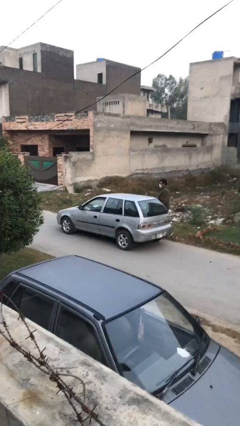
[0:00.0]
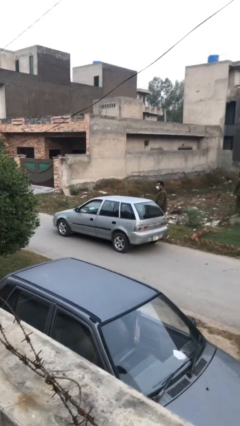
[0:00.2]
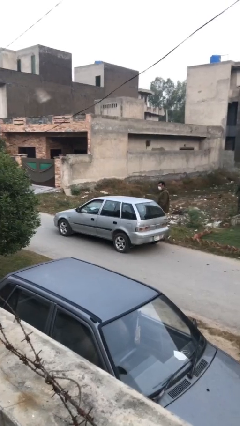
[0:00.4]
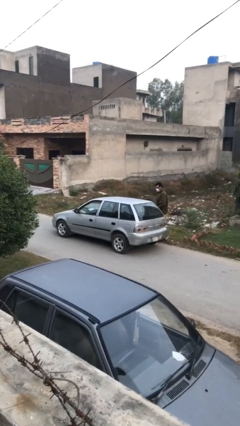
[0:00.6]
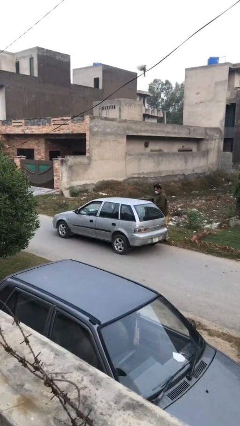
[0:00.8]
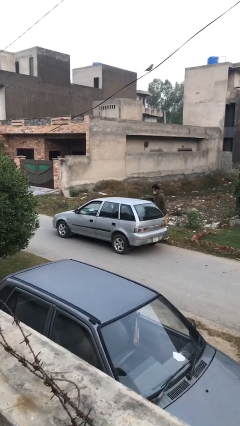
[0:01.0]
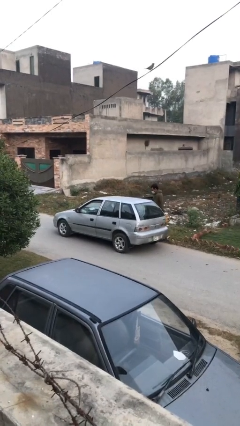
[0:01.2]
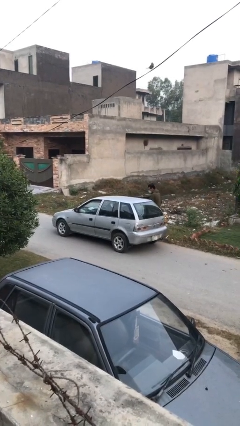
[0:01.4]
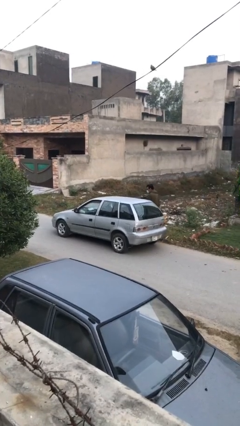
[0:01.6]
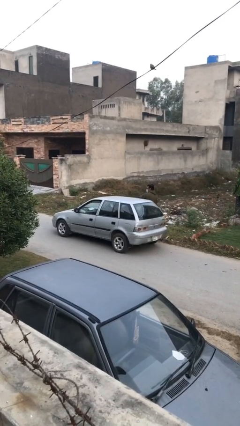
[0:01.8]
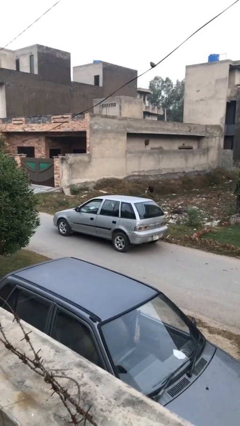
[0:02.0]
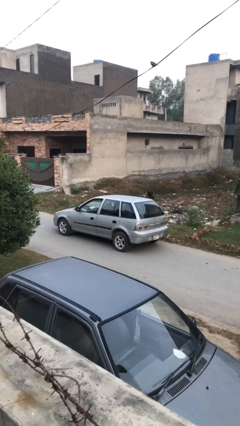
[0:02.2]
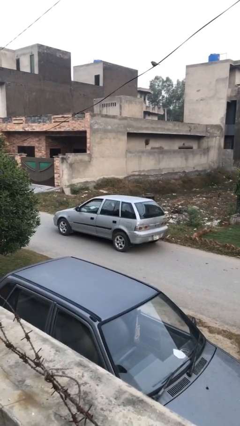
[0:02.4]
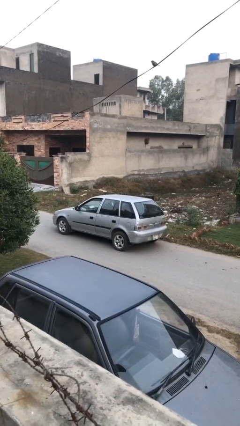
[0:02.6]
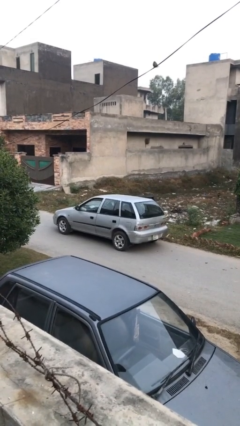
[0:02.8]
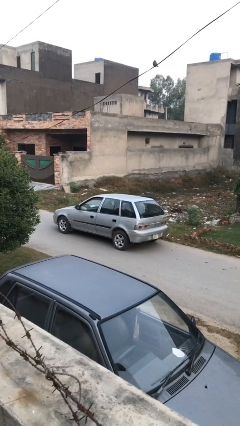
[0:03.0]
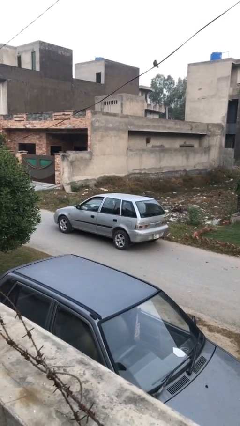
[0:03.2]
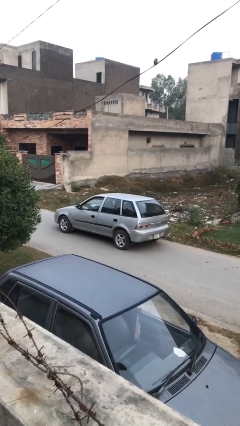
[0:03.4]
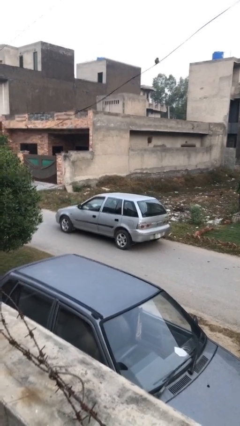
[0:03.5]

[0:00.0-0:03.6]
car picks up person

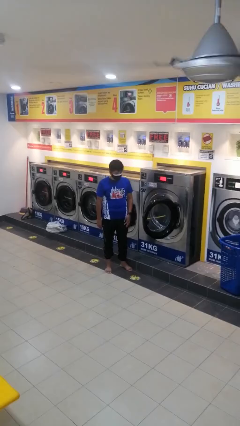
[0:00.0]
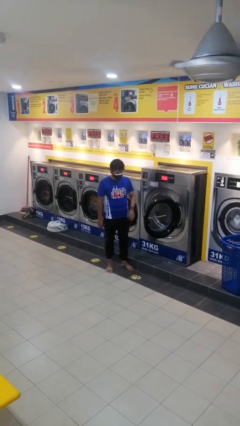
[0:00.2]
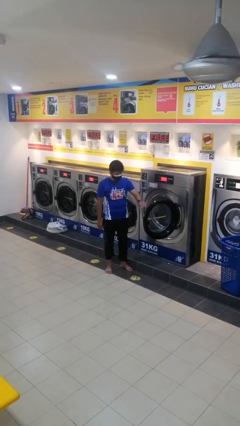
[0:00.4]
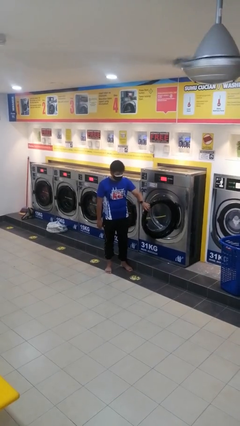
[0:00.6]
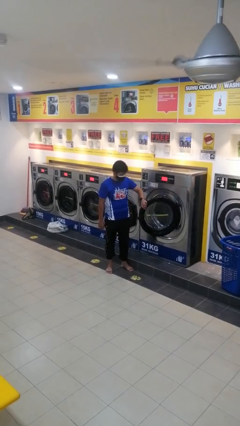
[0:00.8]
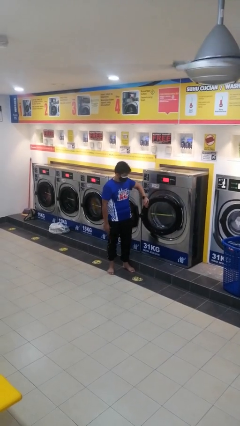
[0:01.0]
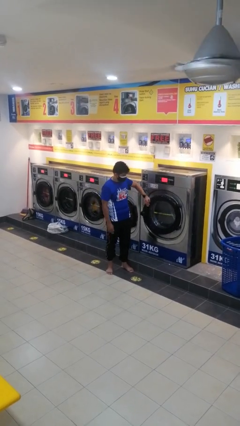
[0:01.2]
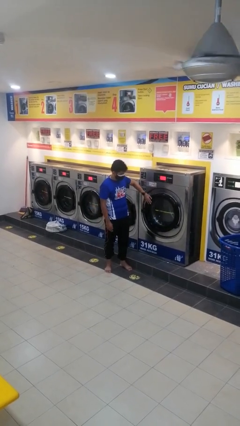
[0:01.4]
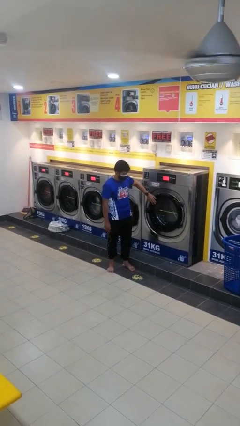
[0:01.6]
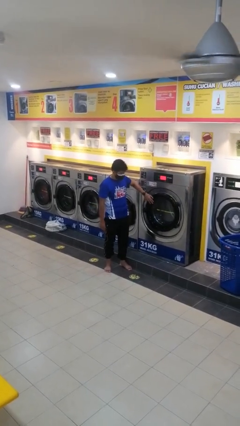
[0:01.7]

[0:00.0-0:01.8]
person closes clothes washer

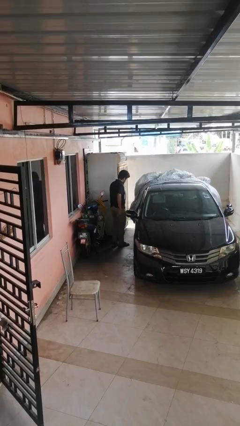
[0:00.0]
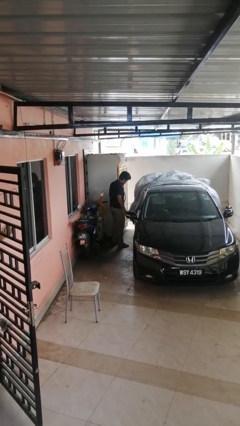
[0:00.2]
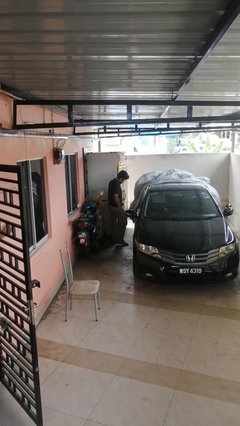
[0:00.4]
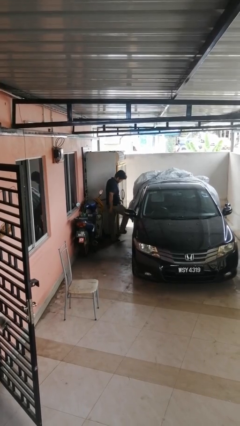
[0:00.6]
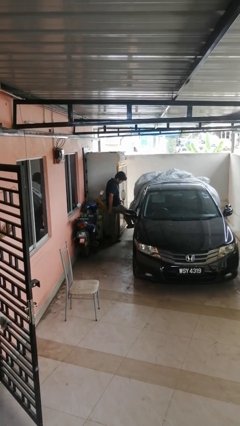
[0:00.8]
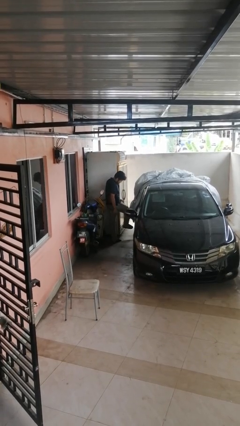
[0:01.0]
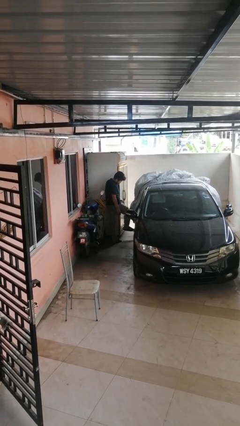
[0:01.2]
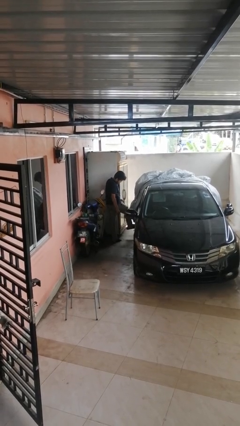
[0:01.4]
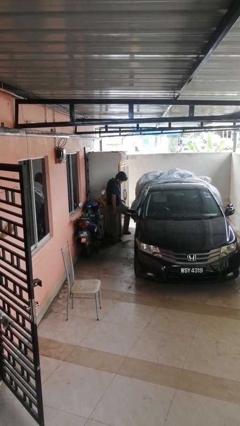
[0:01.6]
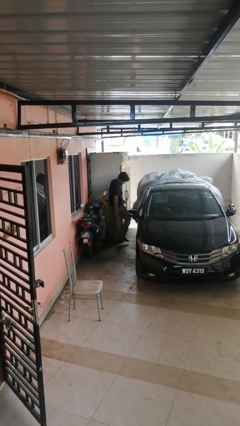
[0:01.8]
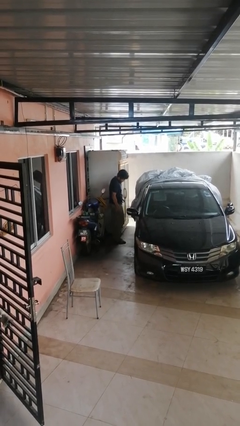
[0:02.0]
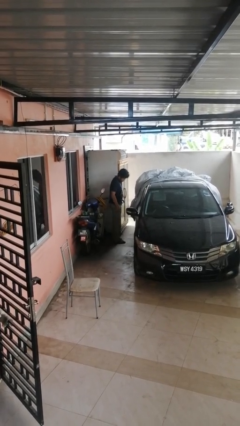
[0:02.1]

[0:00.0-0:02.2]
person kicks car tires

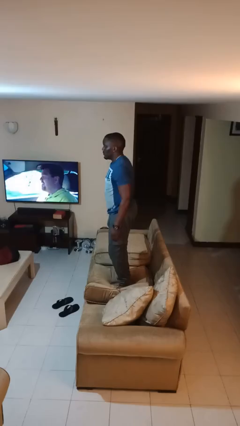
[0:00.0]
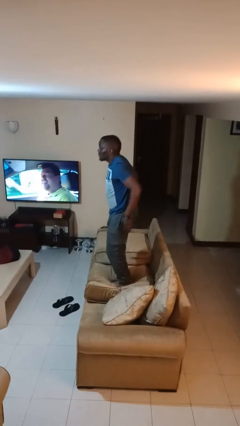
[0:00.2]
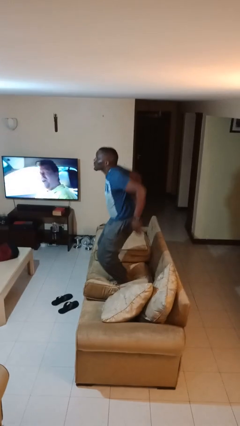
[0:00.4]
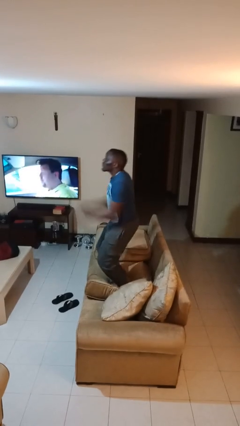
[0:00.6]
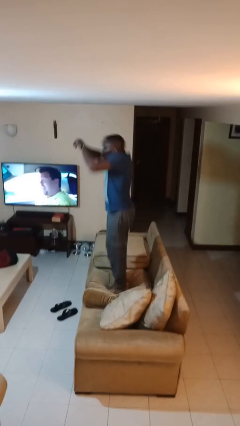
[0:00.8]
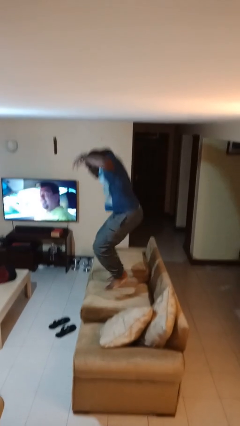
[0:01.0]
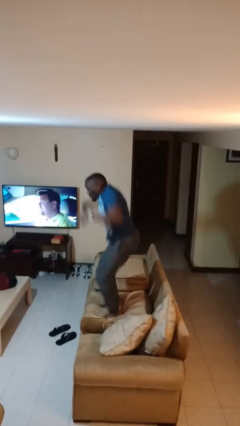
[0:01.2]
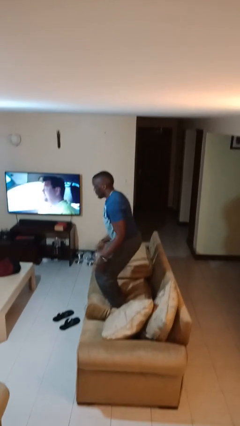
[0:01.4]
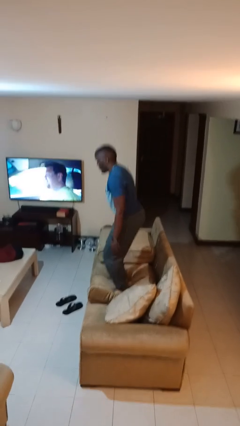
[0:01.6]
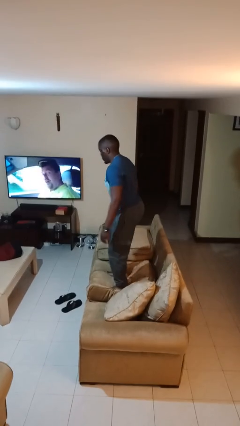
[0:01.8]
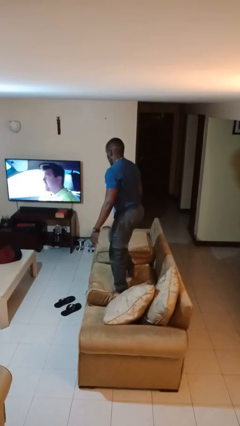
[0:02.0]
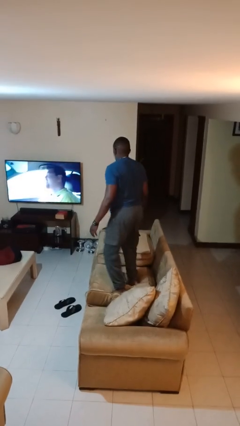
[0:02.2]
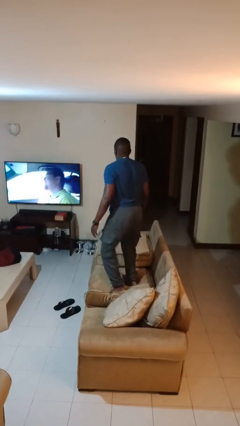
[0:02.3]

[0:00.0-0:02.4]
person jumps on couch

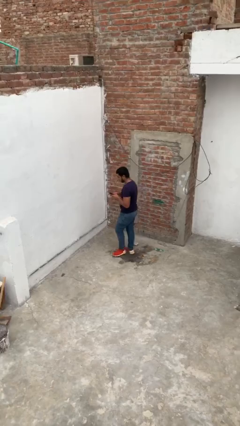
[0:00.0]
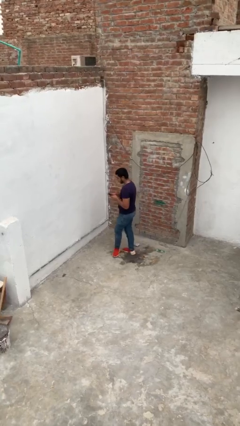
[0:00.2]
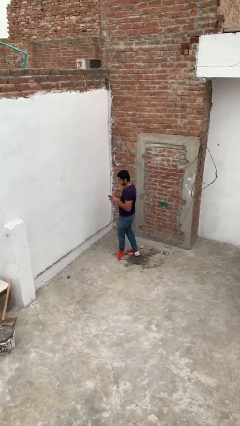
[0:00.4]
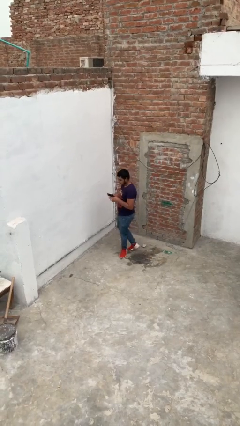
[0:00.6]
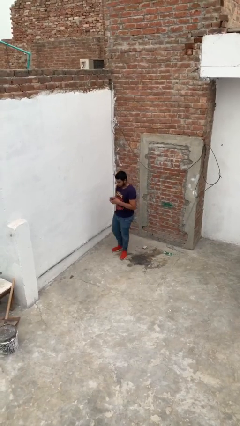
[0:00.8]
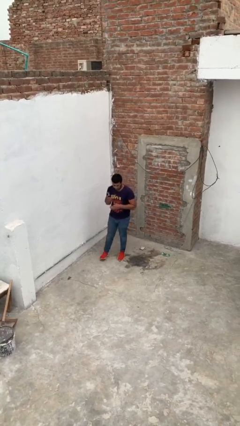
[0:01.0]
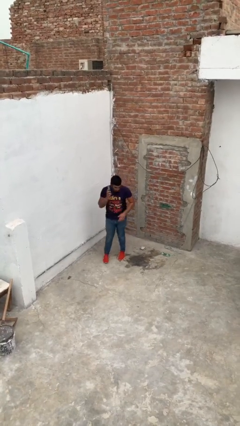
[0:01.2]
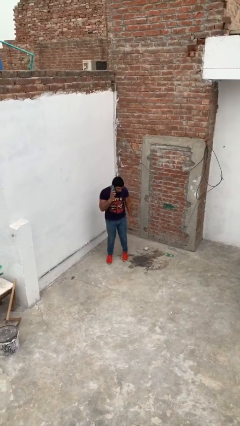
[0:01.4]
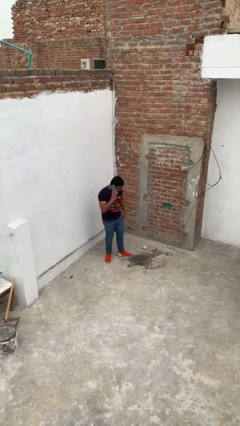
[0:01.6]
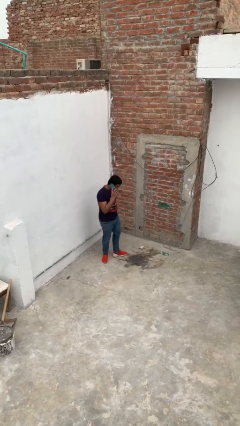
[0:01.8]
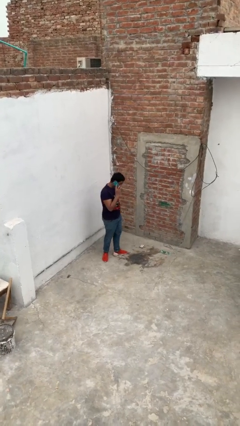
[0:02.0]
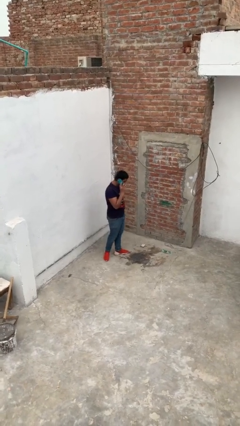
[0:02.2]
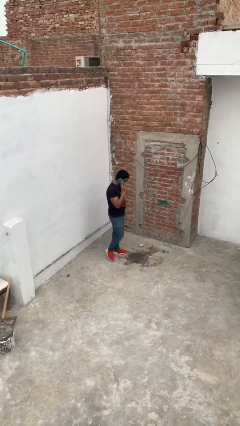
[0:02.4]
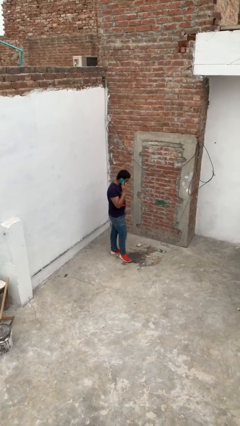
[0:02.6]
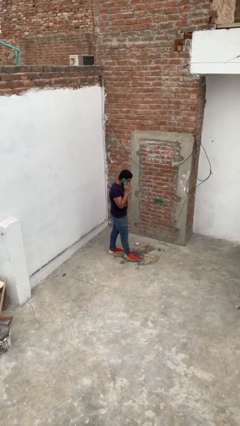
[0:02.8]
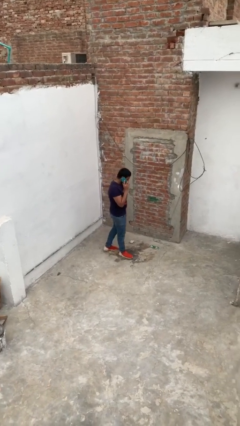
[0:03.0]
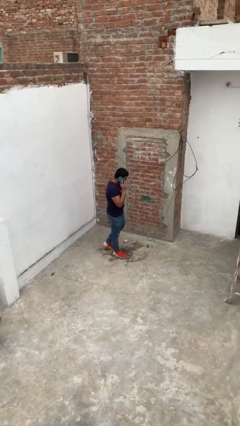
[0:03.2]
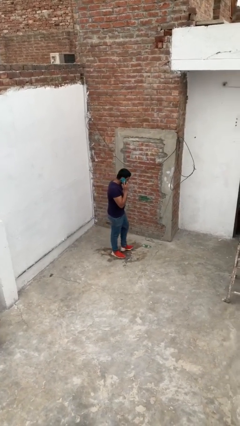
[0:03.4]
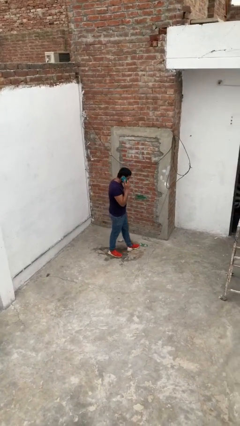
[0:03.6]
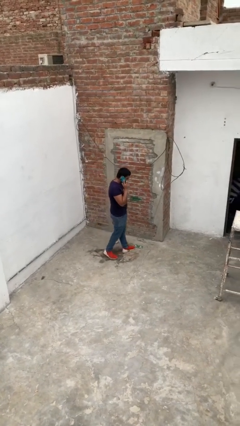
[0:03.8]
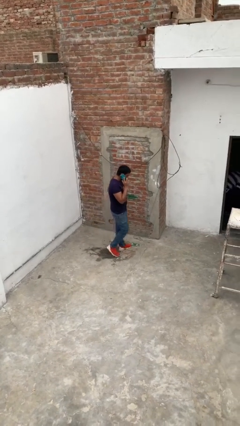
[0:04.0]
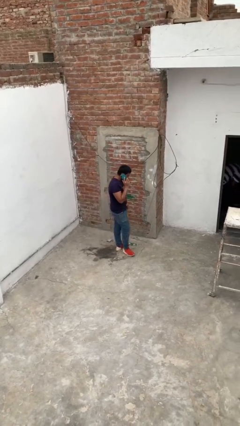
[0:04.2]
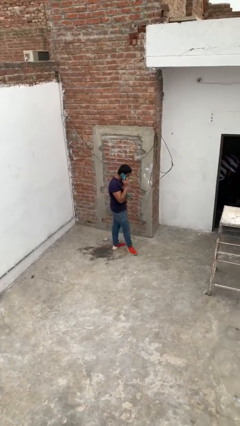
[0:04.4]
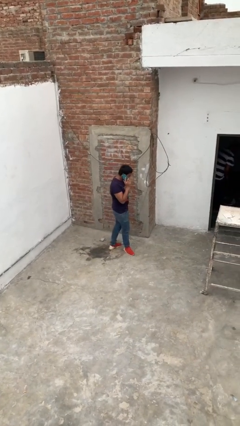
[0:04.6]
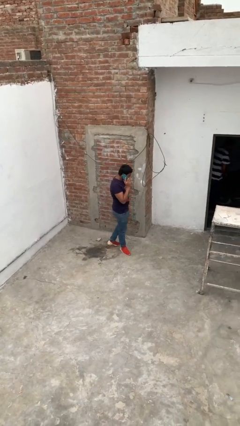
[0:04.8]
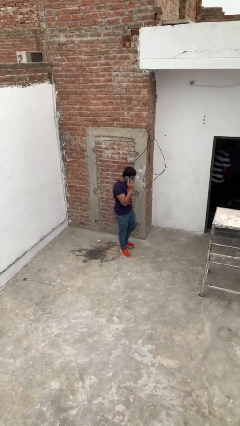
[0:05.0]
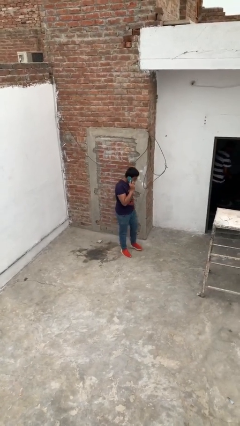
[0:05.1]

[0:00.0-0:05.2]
person talks on phone

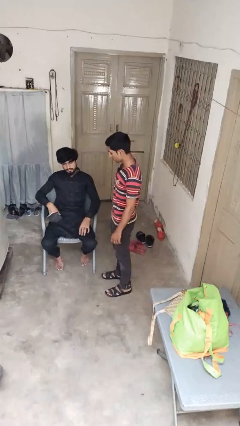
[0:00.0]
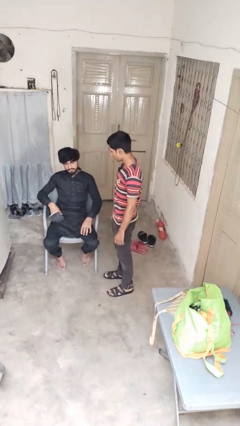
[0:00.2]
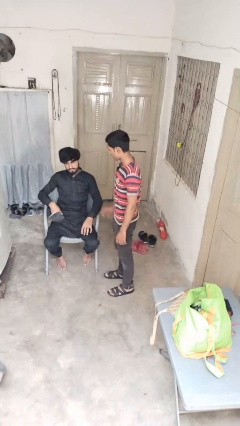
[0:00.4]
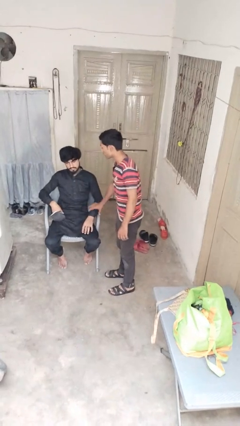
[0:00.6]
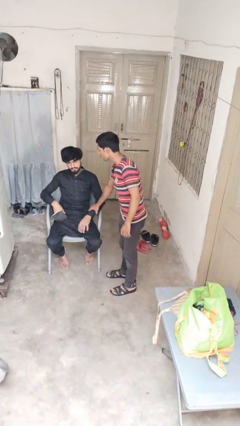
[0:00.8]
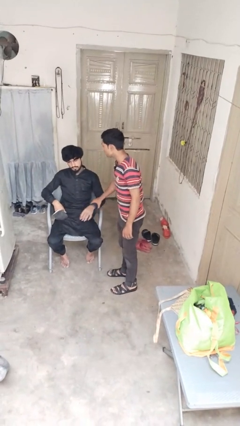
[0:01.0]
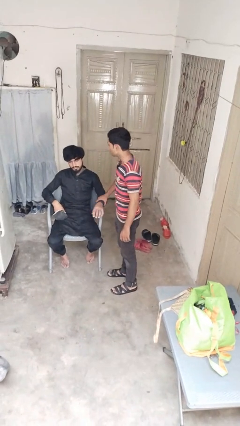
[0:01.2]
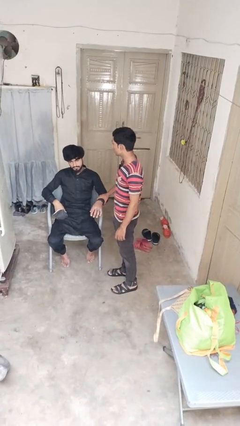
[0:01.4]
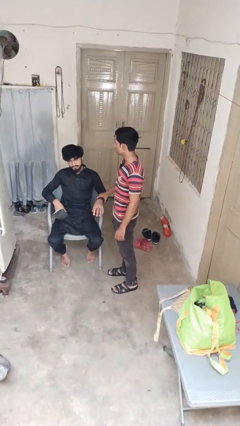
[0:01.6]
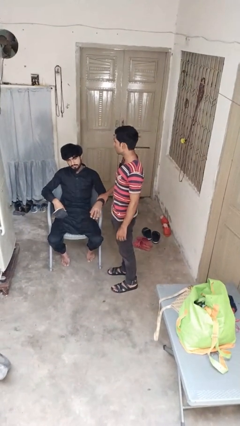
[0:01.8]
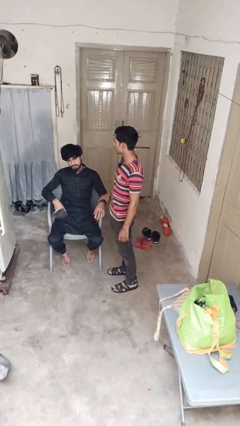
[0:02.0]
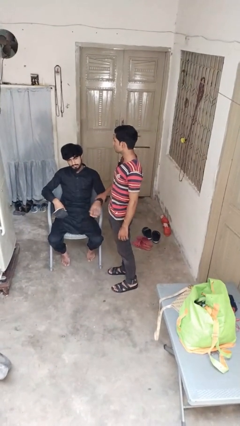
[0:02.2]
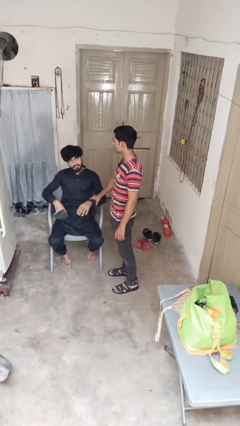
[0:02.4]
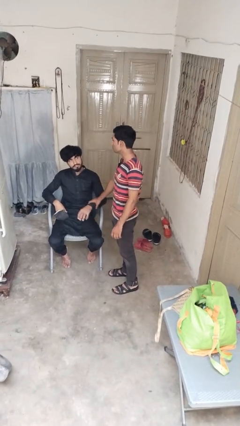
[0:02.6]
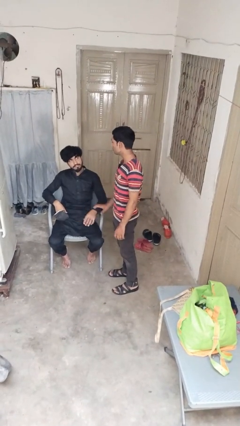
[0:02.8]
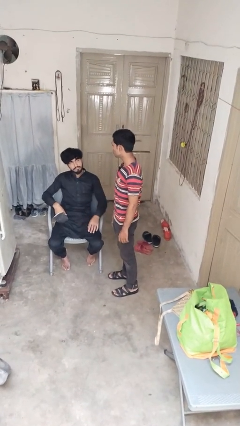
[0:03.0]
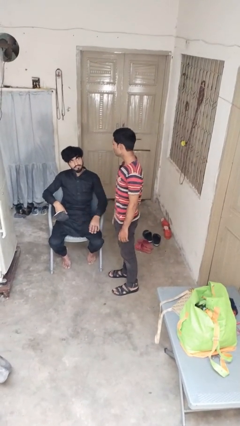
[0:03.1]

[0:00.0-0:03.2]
person grabs person by forearm
